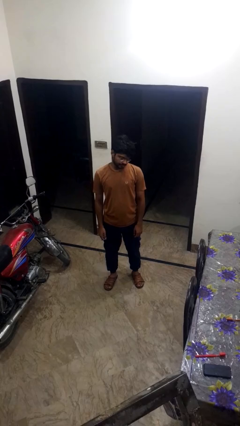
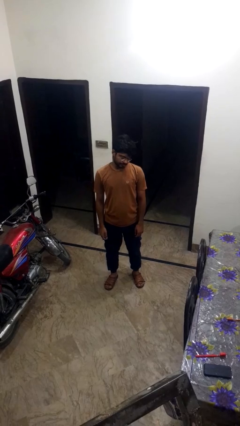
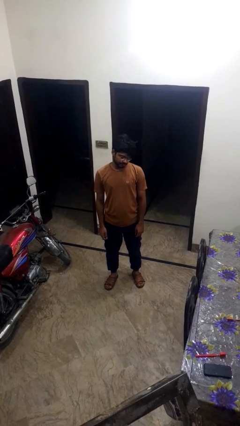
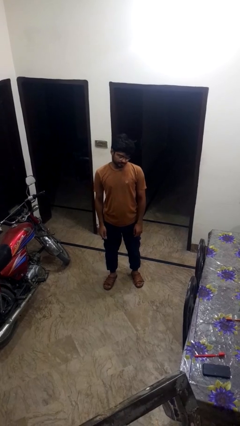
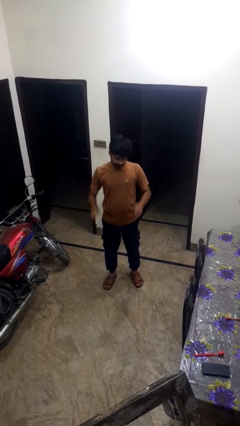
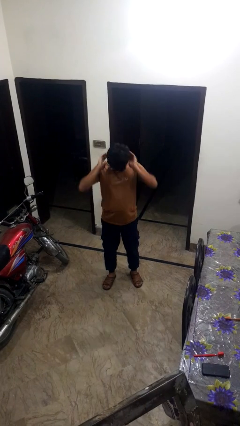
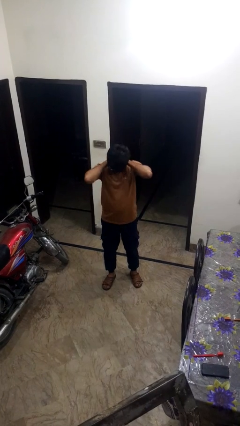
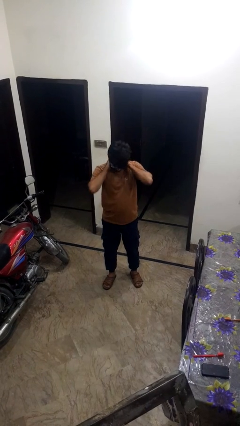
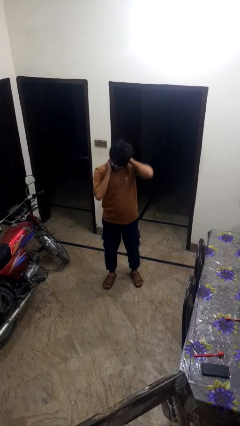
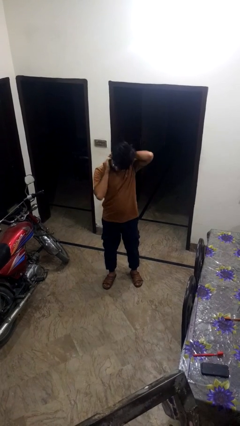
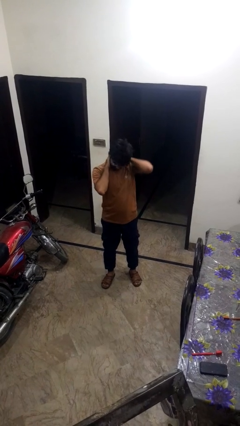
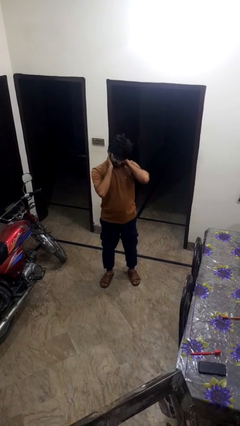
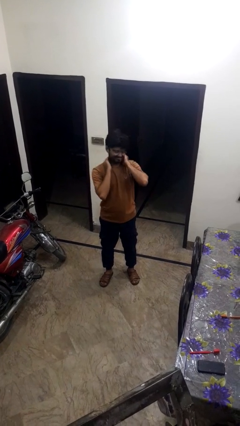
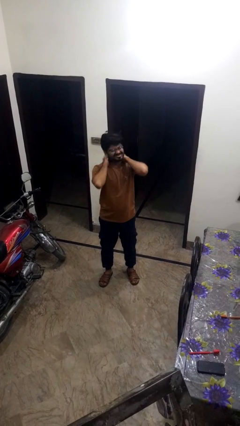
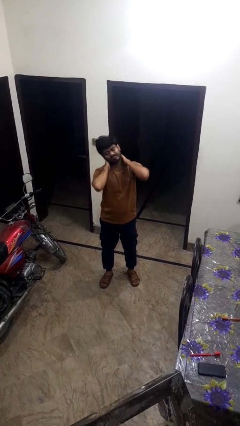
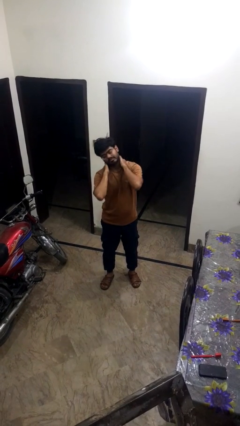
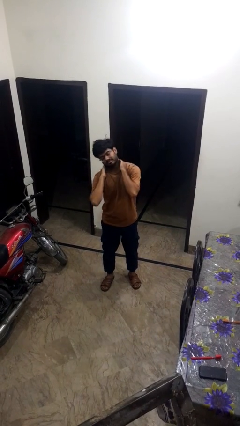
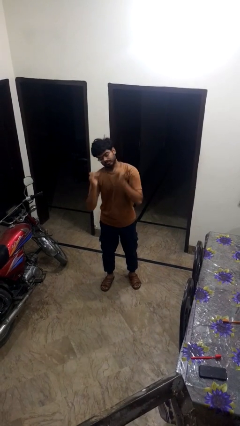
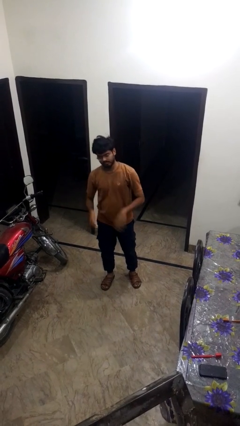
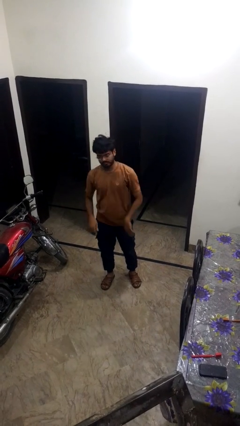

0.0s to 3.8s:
person rubs neck

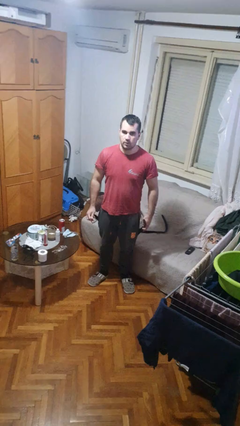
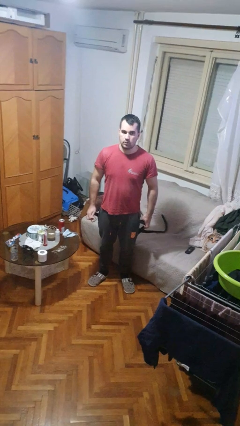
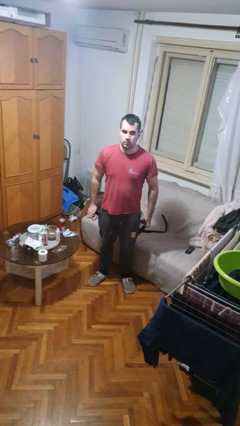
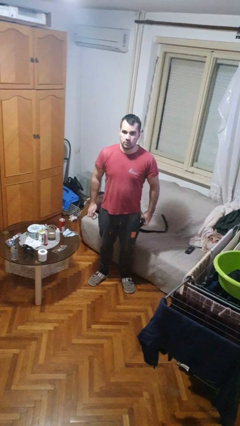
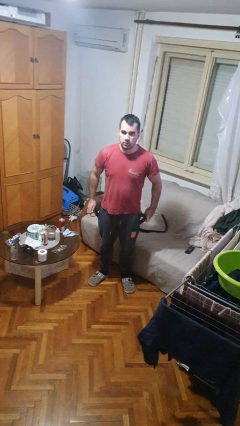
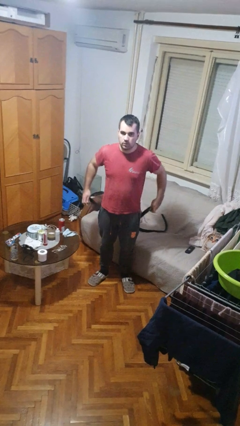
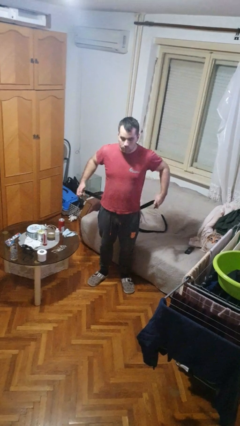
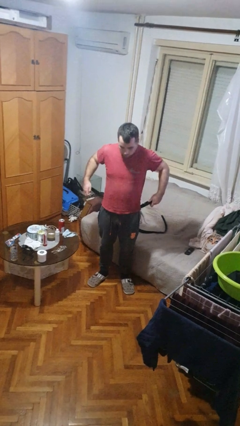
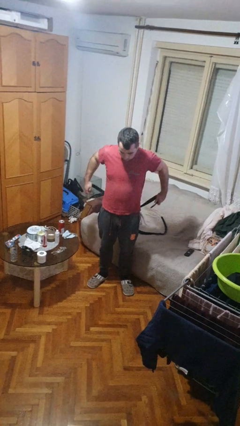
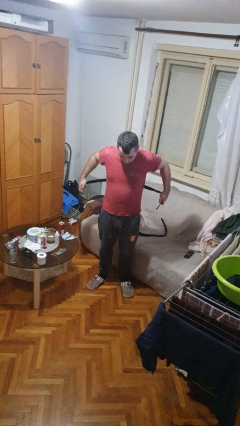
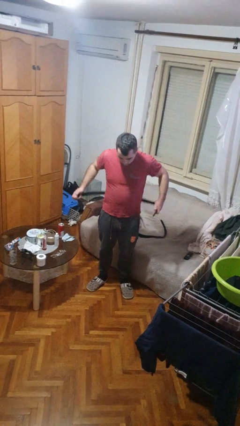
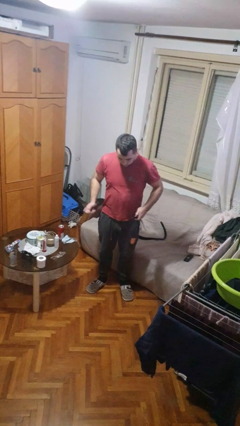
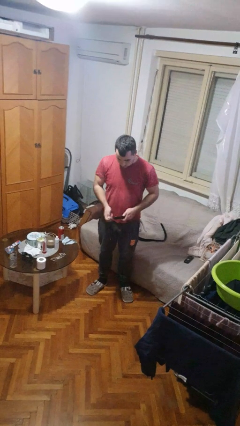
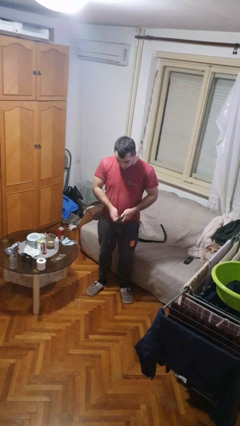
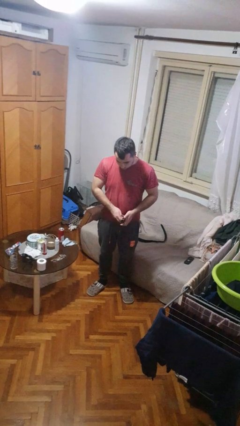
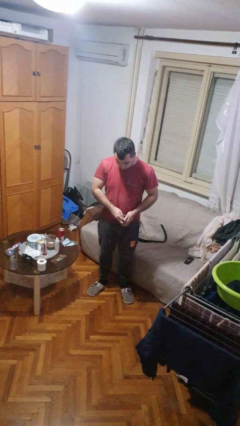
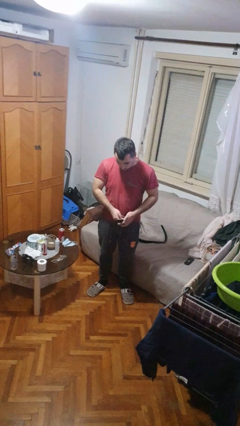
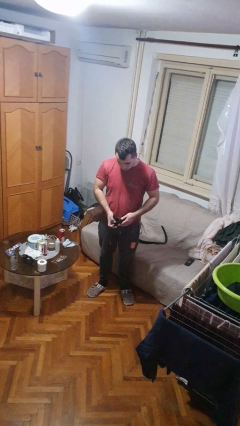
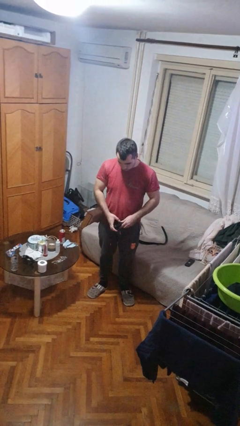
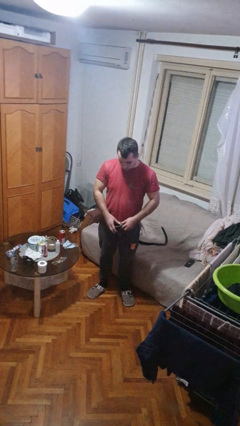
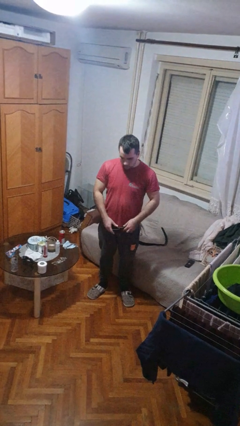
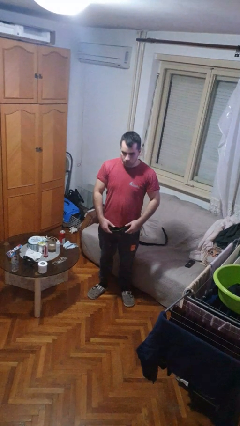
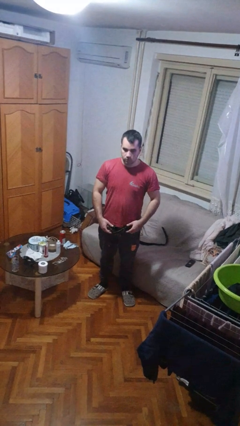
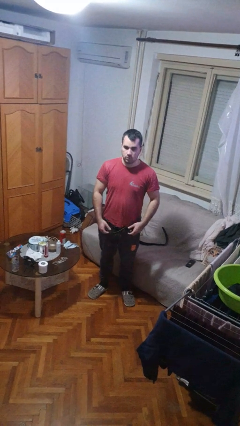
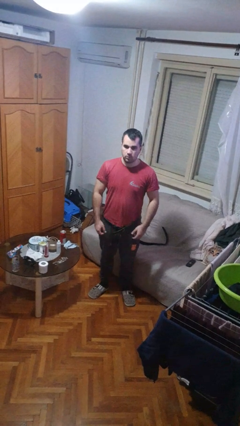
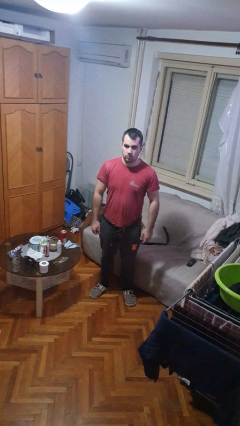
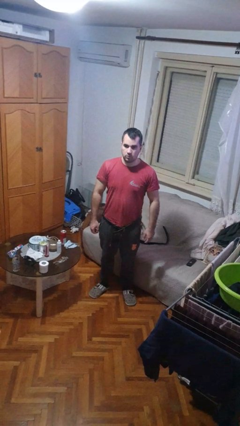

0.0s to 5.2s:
person puts on belt

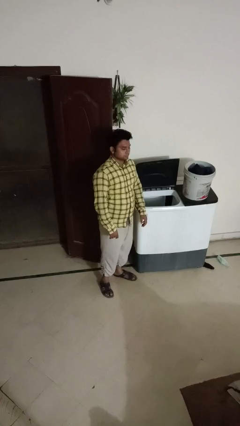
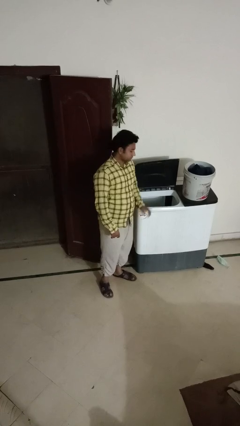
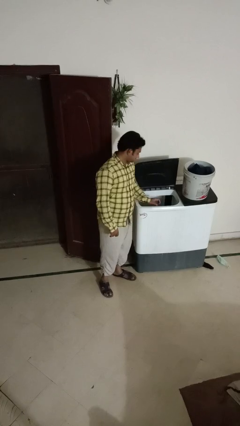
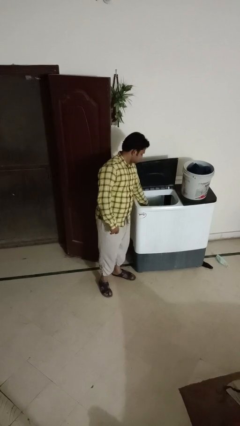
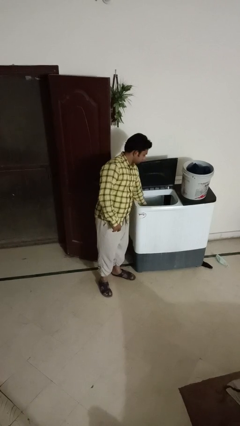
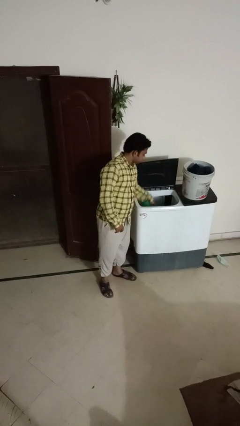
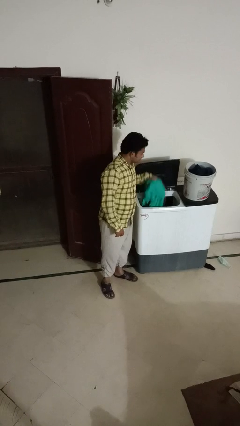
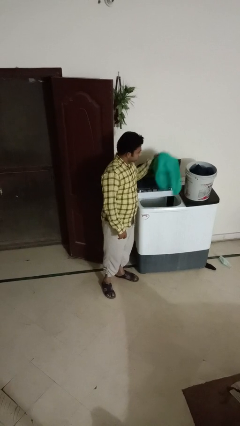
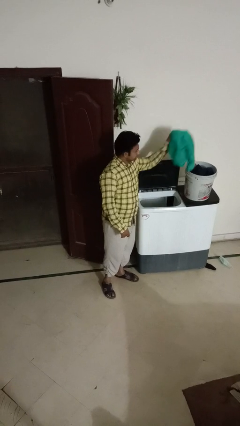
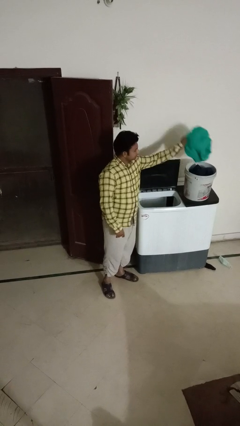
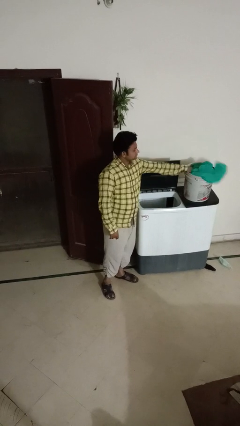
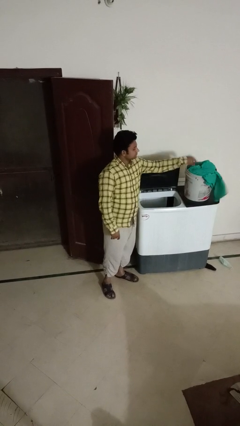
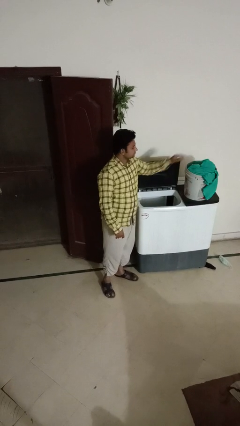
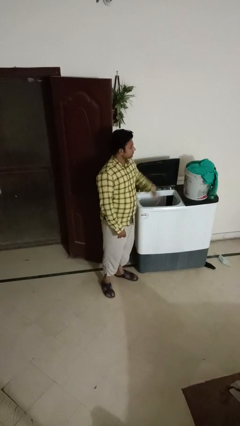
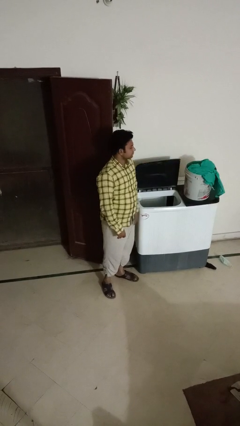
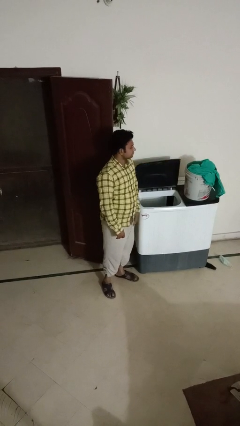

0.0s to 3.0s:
person unloads clotheswasher

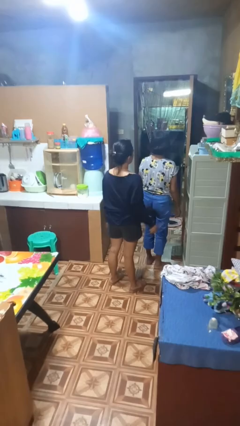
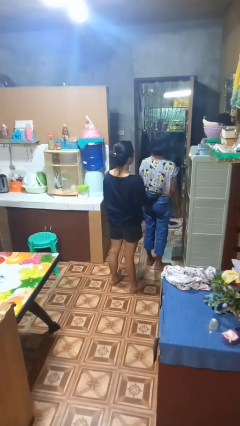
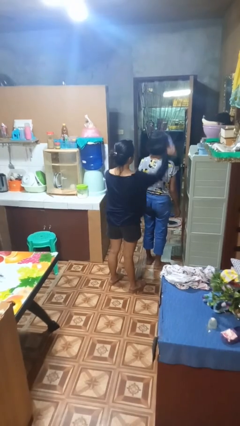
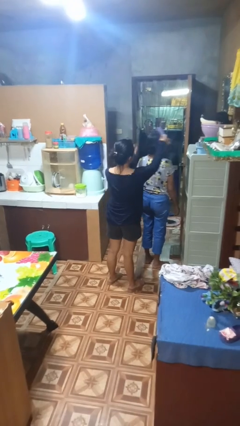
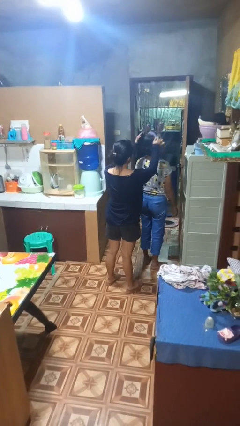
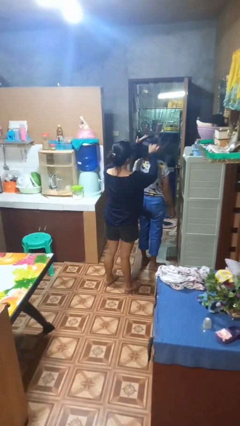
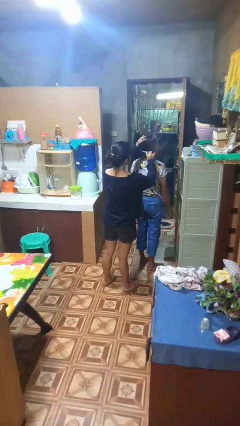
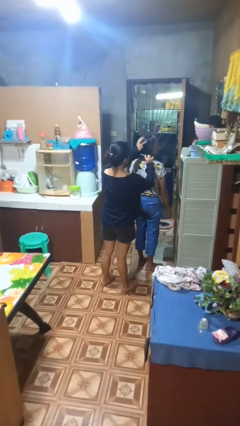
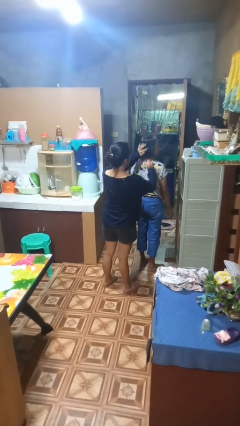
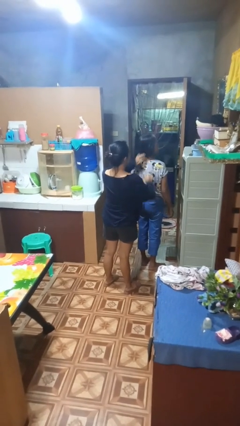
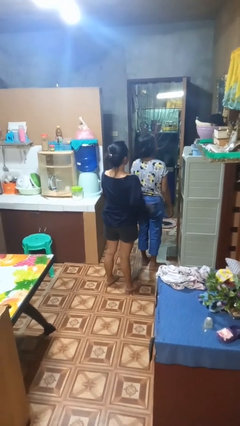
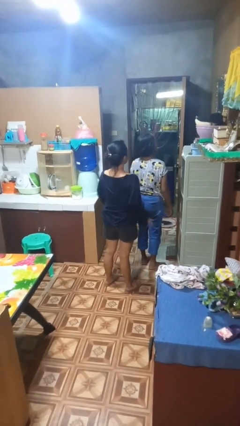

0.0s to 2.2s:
person brushes hair of person

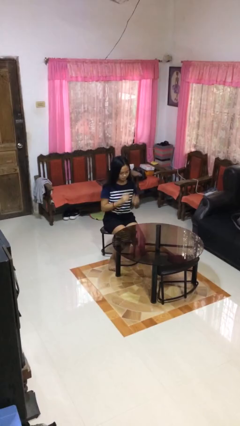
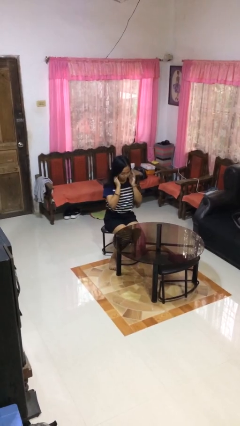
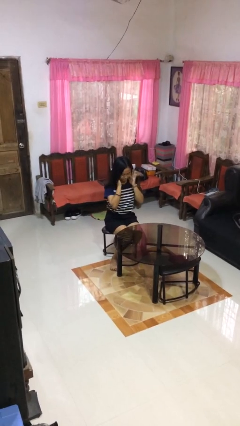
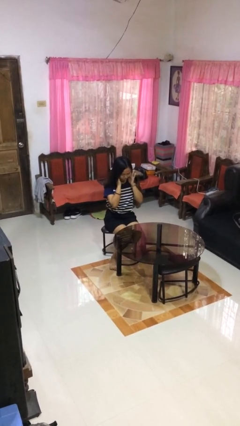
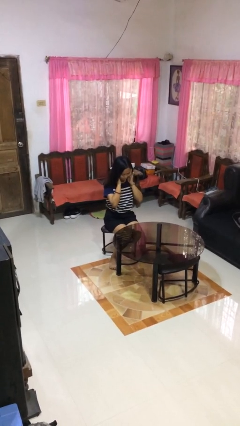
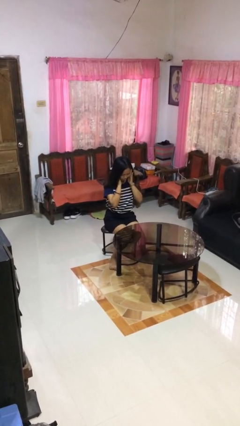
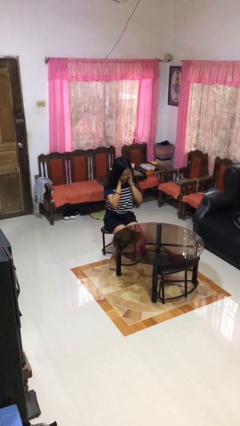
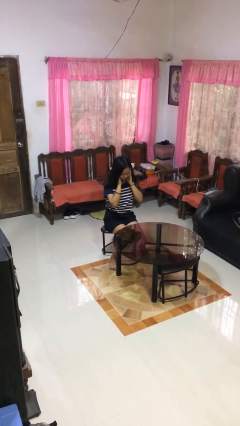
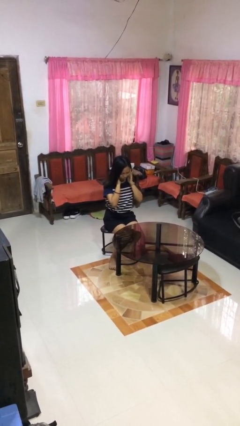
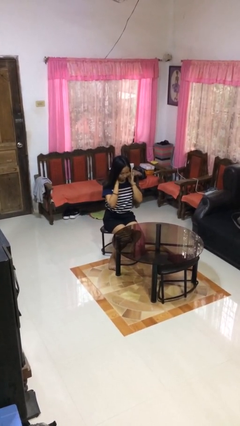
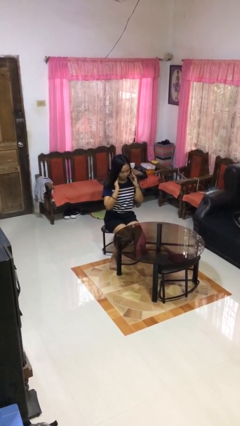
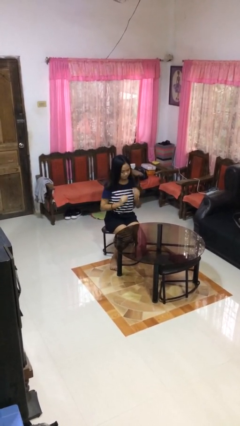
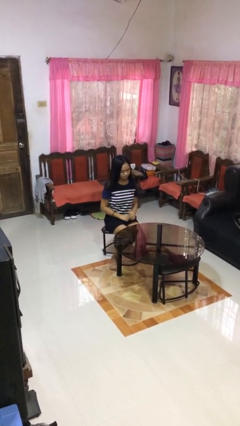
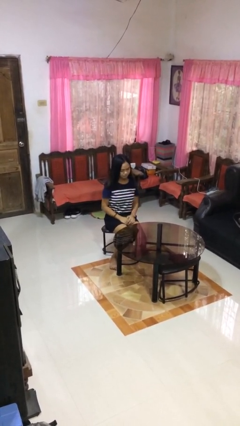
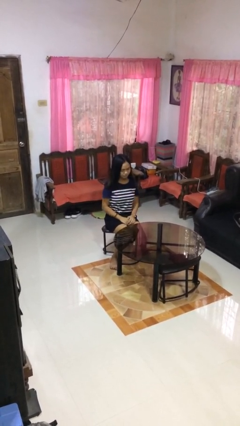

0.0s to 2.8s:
person puts fingers in ear

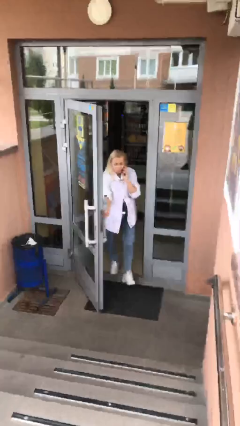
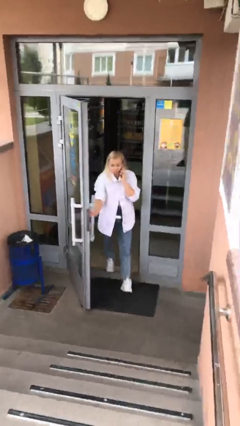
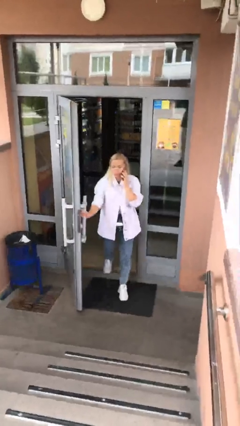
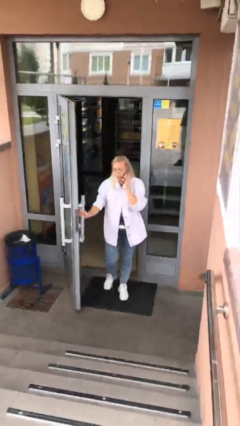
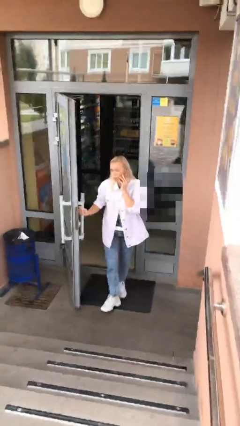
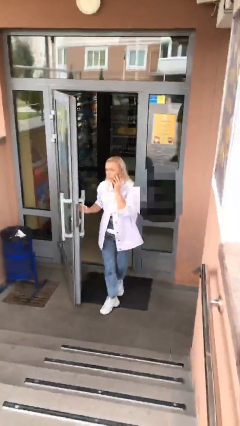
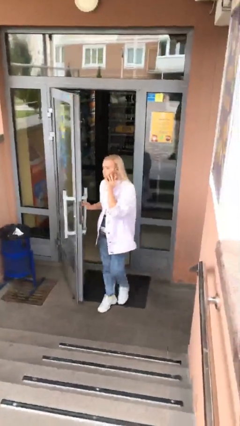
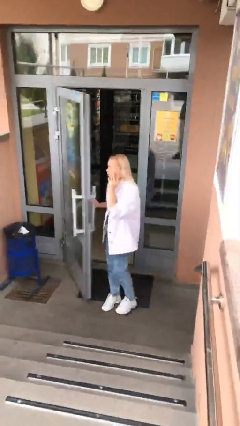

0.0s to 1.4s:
person enters scene through structure
